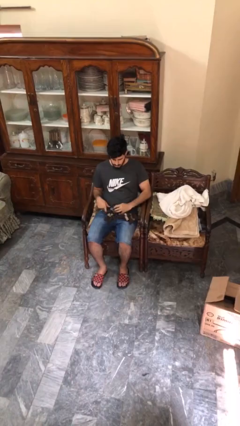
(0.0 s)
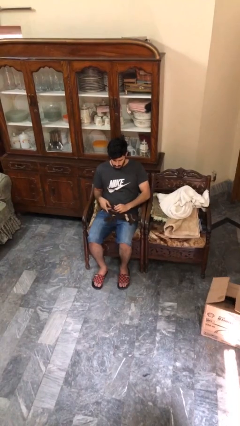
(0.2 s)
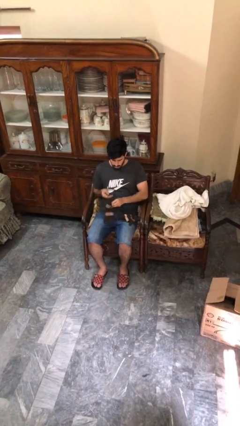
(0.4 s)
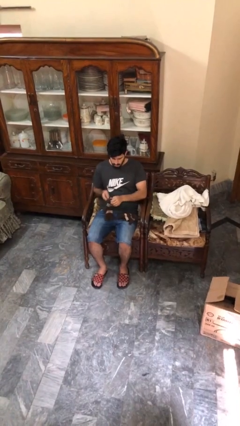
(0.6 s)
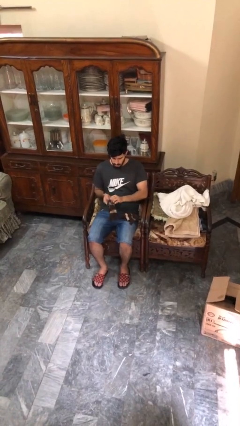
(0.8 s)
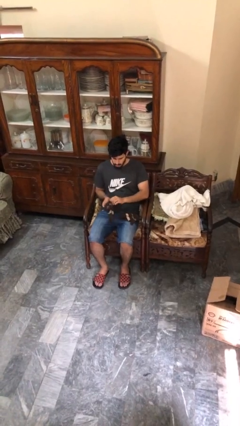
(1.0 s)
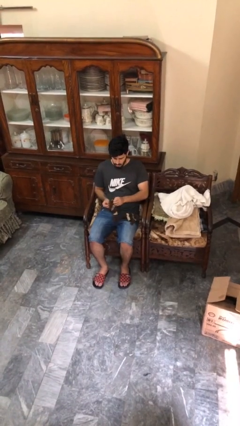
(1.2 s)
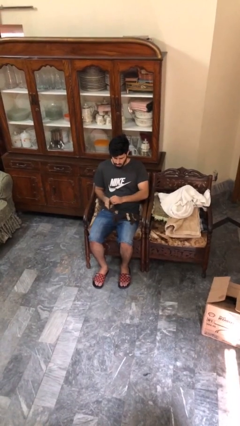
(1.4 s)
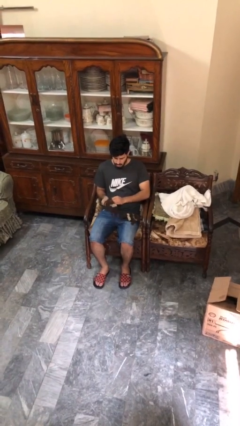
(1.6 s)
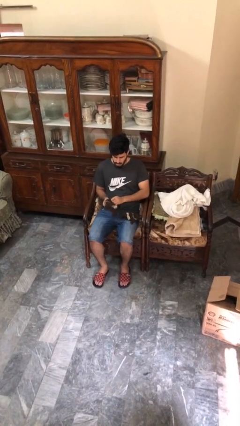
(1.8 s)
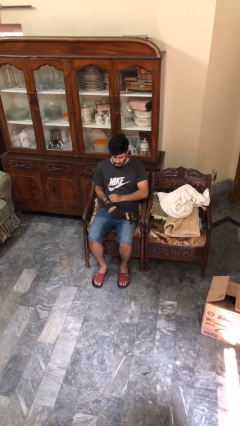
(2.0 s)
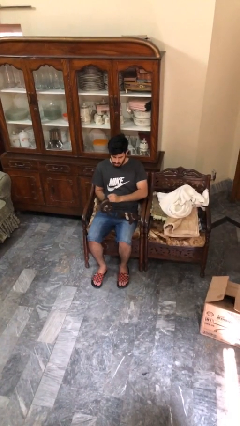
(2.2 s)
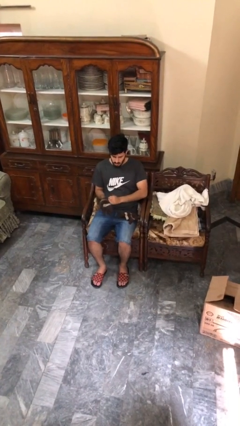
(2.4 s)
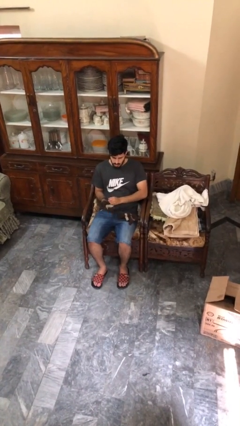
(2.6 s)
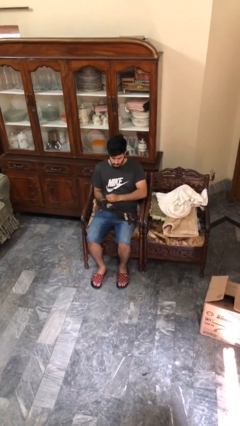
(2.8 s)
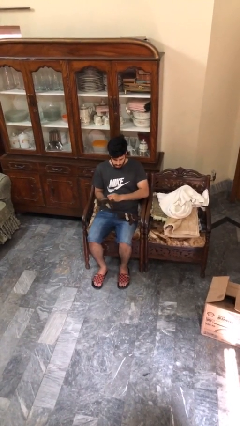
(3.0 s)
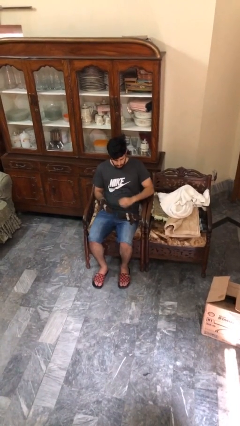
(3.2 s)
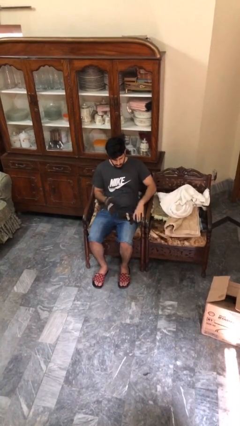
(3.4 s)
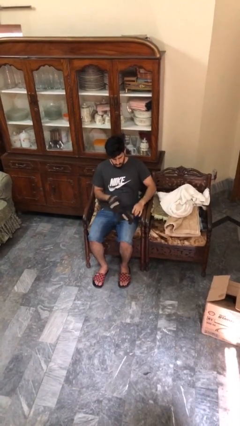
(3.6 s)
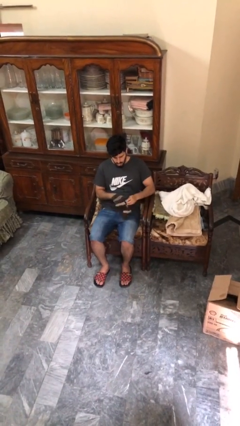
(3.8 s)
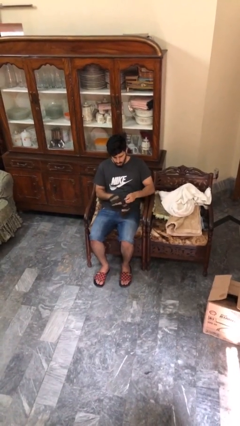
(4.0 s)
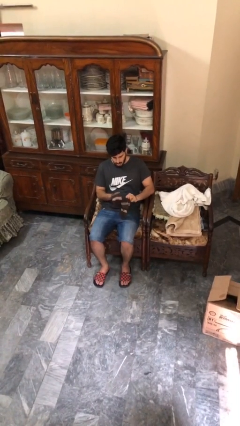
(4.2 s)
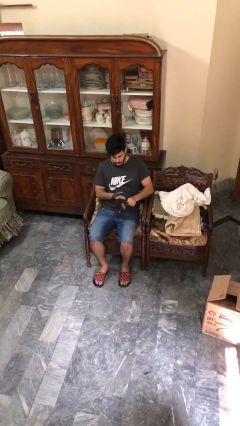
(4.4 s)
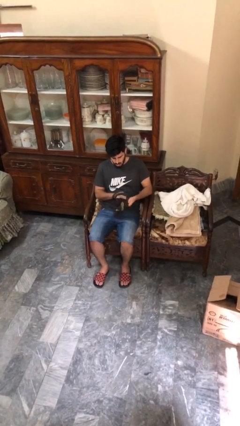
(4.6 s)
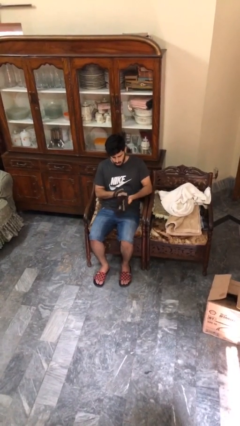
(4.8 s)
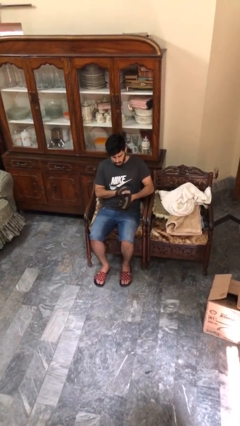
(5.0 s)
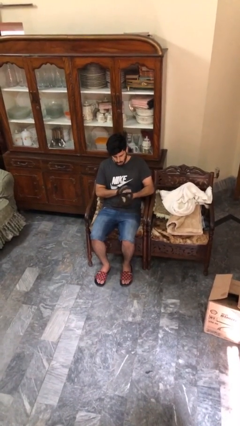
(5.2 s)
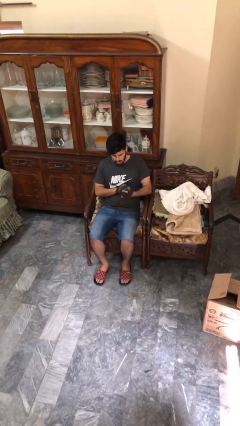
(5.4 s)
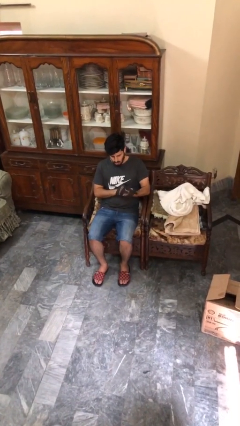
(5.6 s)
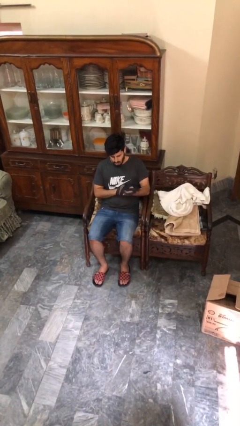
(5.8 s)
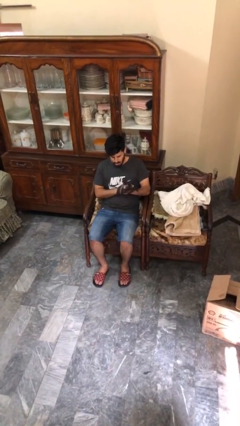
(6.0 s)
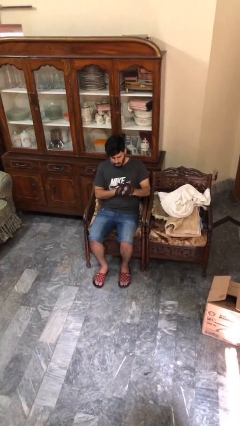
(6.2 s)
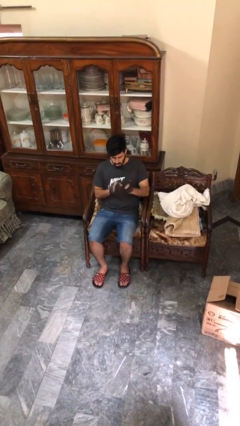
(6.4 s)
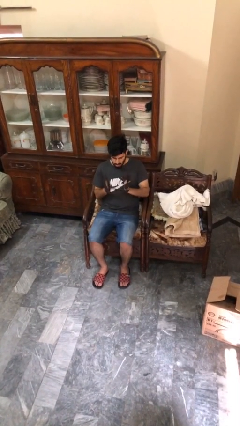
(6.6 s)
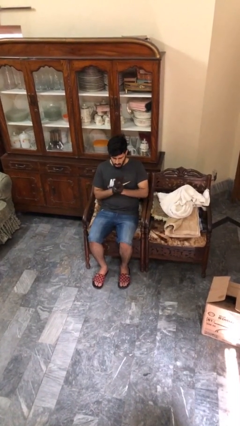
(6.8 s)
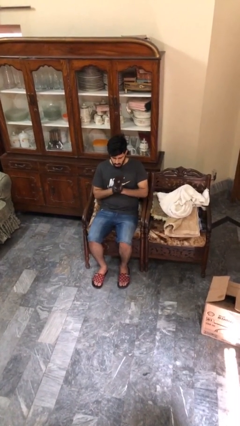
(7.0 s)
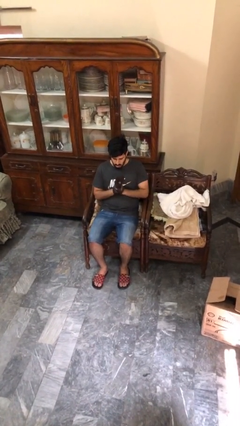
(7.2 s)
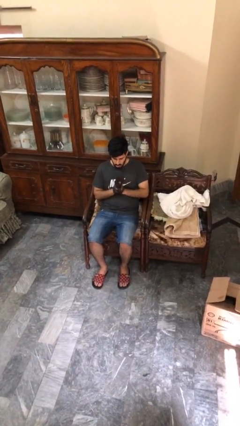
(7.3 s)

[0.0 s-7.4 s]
person puts on gloves

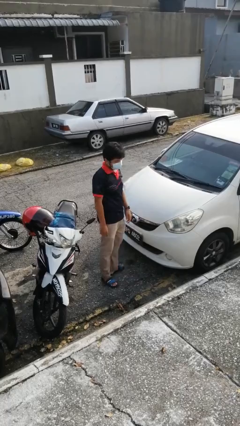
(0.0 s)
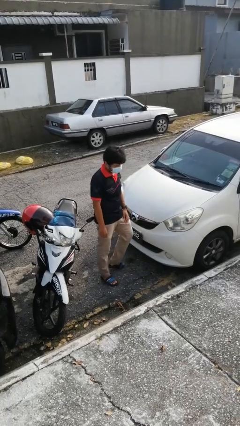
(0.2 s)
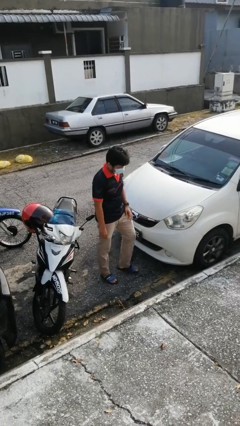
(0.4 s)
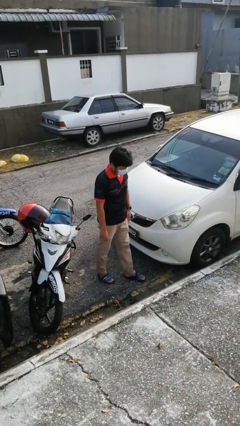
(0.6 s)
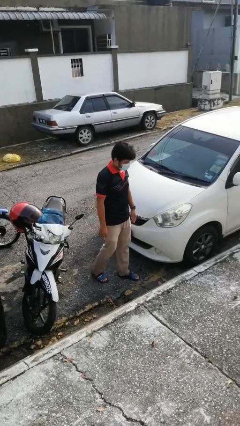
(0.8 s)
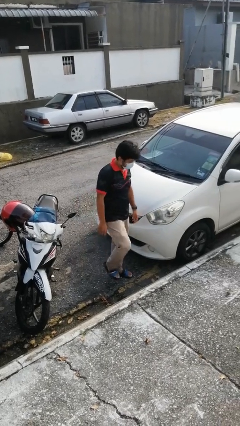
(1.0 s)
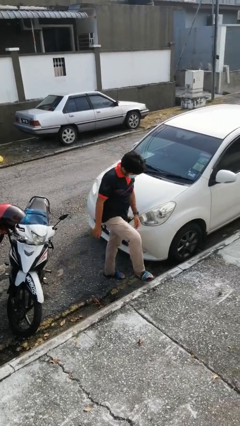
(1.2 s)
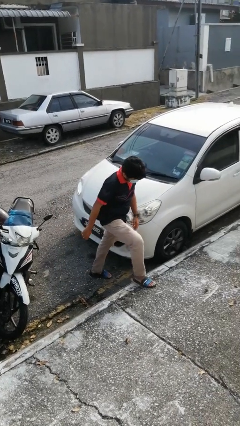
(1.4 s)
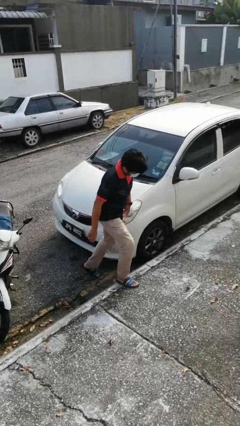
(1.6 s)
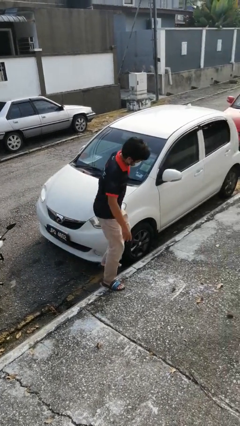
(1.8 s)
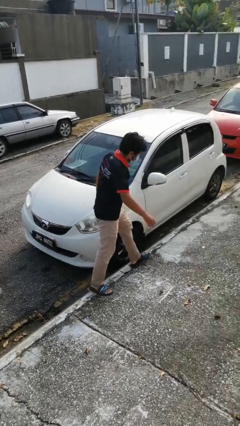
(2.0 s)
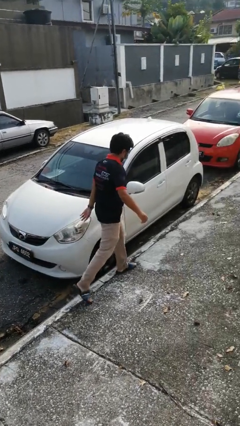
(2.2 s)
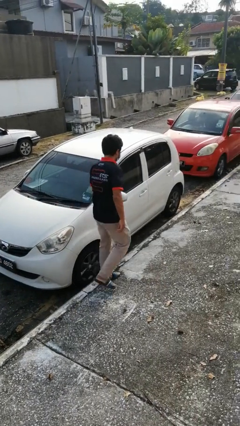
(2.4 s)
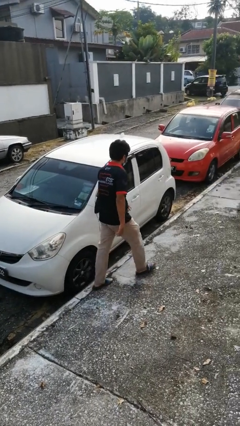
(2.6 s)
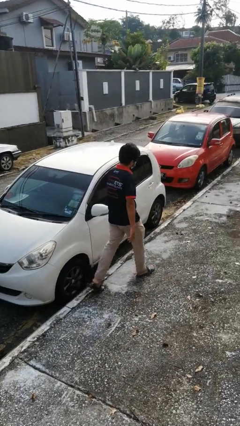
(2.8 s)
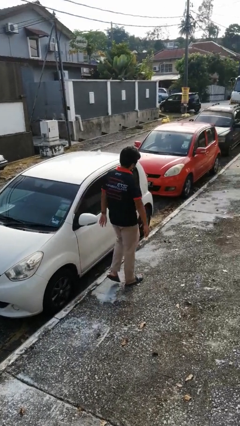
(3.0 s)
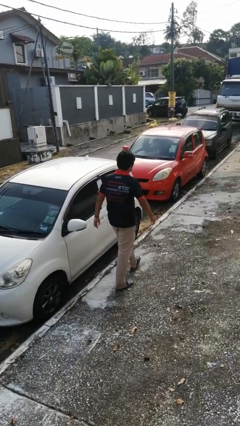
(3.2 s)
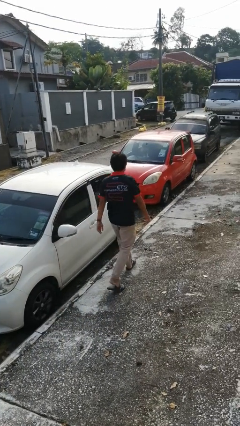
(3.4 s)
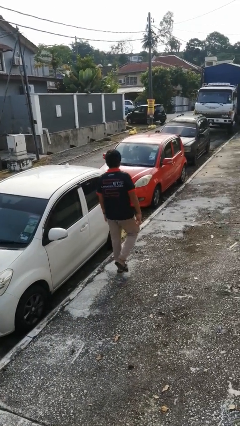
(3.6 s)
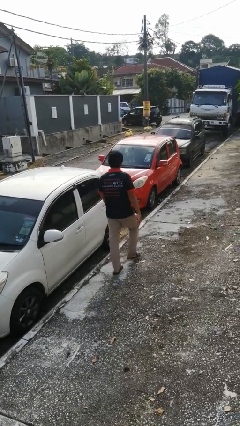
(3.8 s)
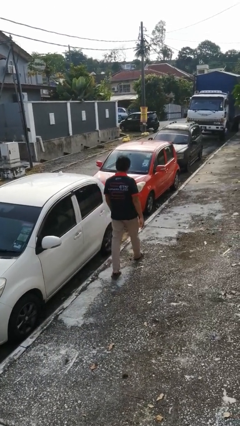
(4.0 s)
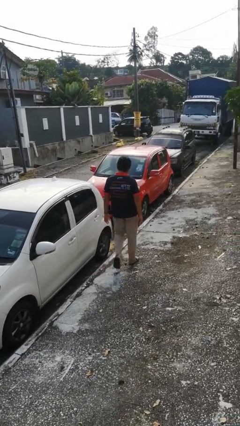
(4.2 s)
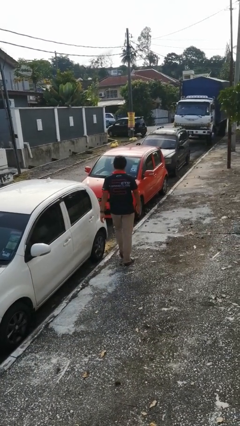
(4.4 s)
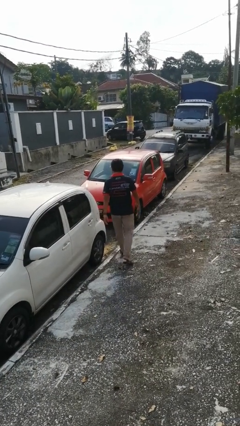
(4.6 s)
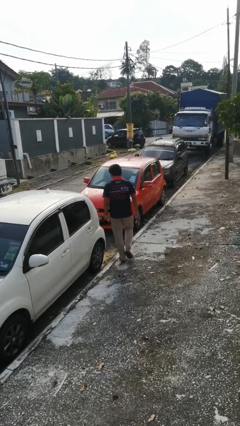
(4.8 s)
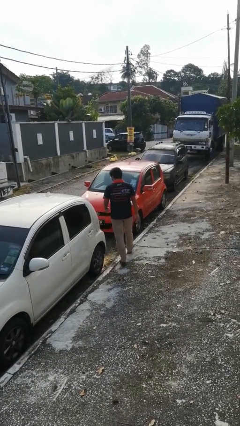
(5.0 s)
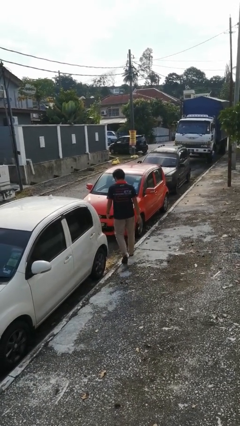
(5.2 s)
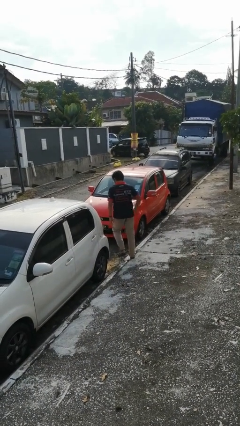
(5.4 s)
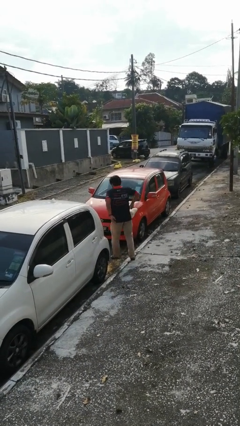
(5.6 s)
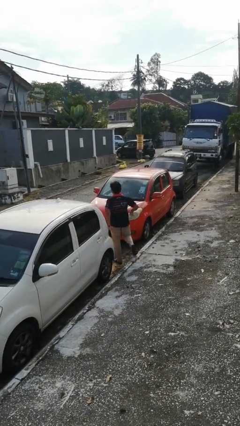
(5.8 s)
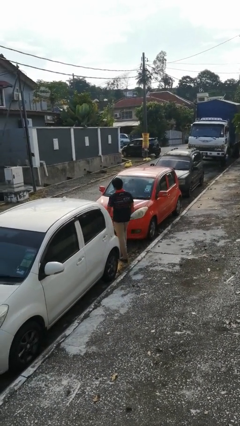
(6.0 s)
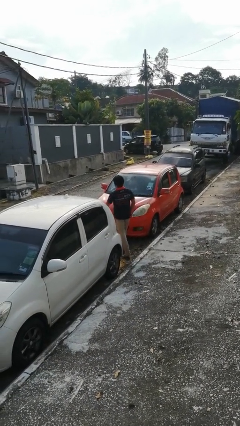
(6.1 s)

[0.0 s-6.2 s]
person walks around car

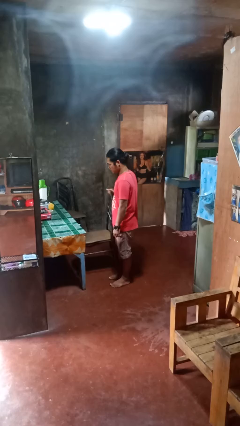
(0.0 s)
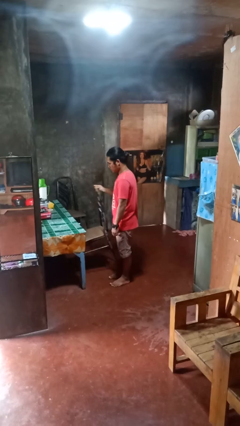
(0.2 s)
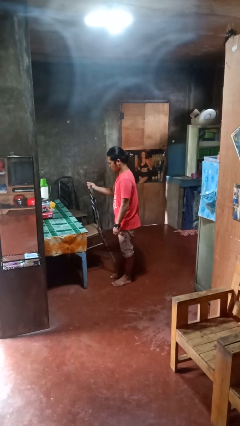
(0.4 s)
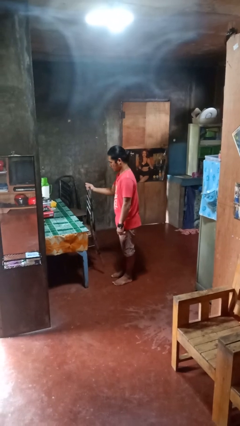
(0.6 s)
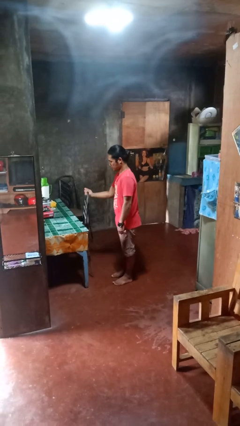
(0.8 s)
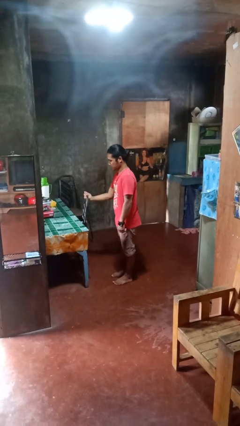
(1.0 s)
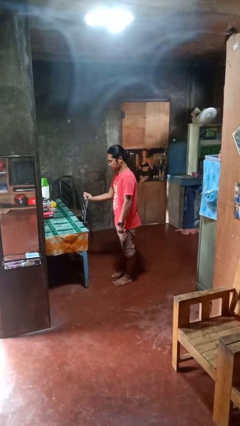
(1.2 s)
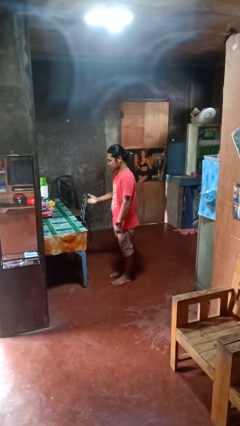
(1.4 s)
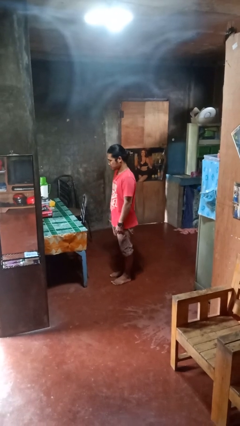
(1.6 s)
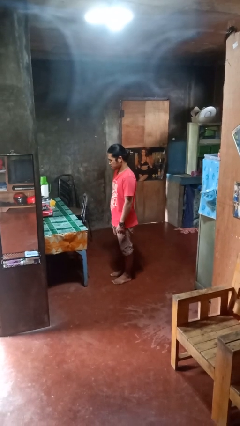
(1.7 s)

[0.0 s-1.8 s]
person pushes in chair

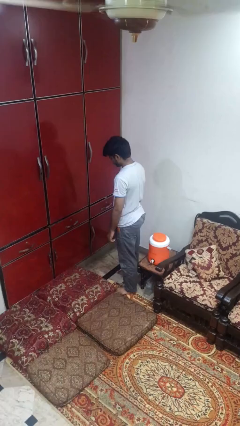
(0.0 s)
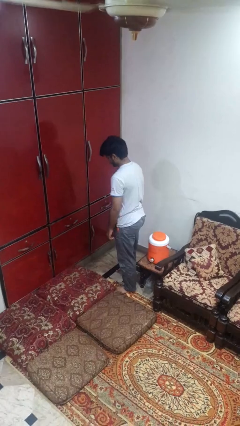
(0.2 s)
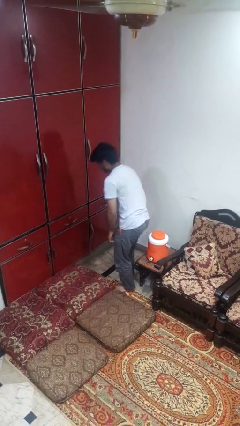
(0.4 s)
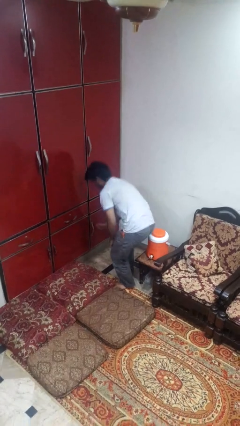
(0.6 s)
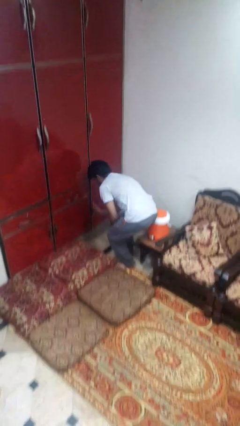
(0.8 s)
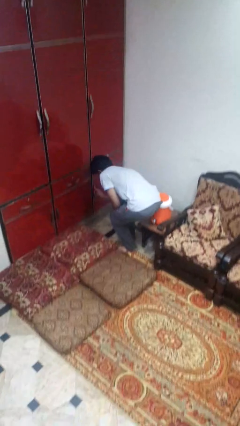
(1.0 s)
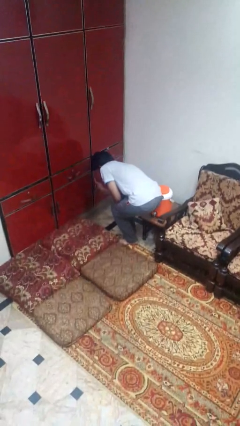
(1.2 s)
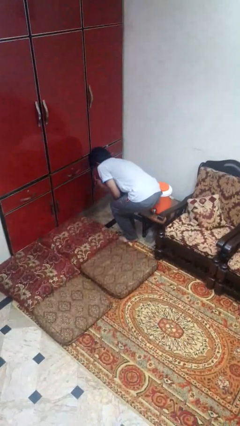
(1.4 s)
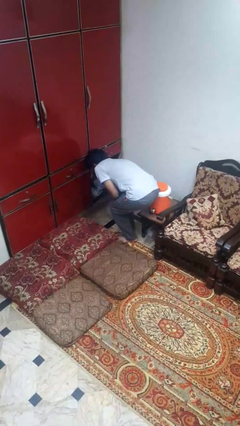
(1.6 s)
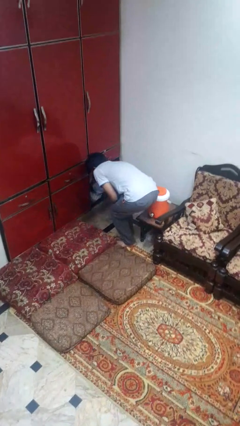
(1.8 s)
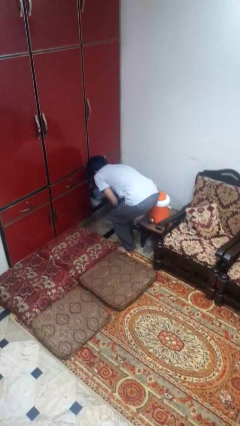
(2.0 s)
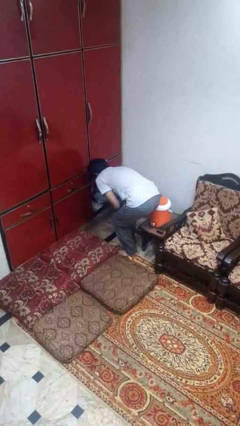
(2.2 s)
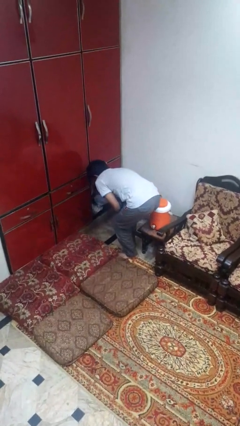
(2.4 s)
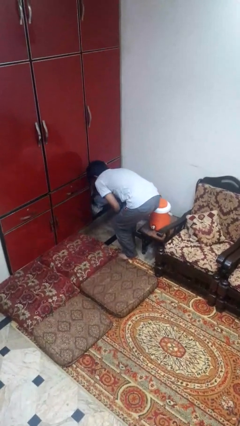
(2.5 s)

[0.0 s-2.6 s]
person closes cabinet
